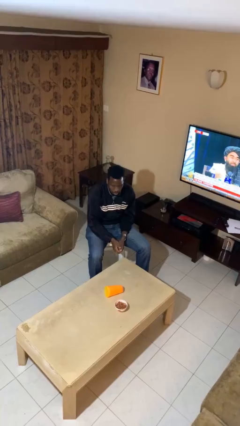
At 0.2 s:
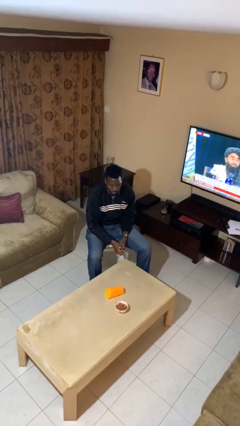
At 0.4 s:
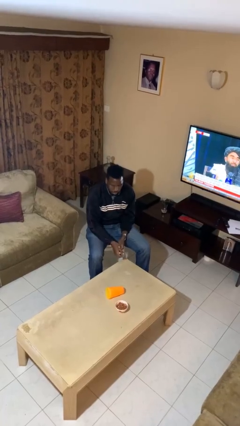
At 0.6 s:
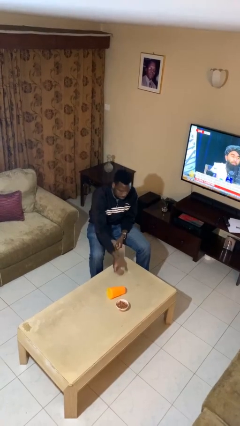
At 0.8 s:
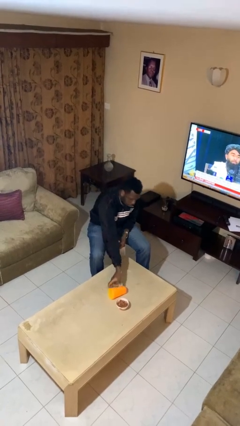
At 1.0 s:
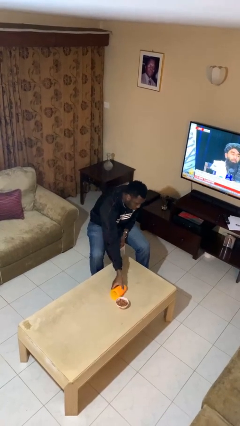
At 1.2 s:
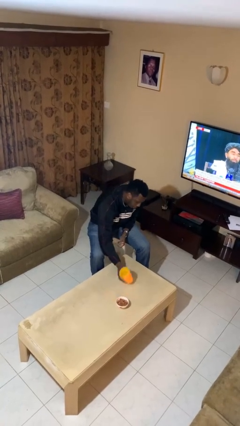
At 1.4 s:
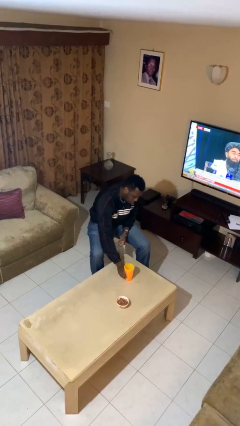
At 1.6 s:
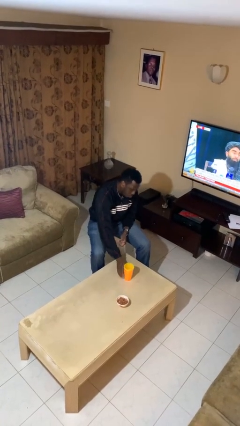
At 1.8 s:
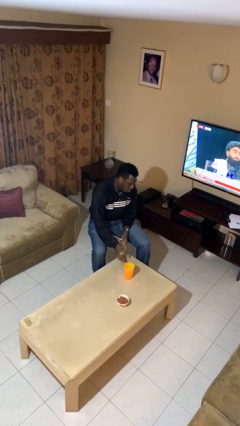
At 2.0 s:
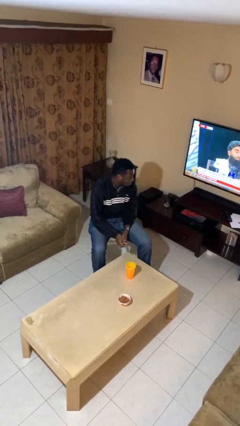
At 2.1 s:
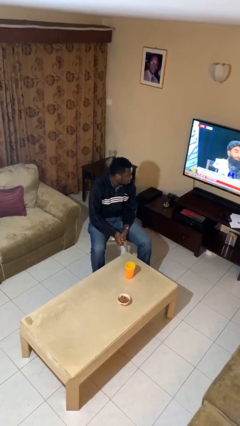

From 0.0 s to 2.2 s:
person sets upright glass

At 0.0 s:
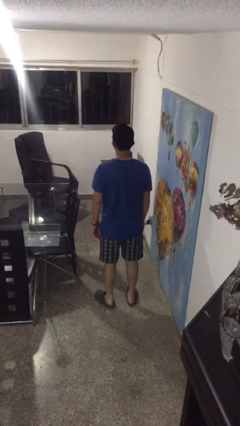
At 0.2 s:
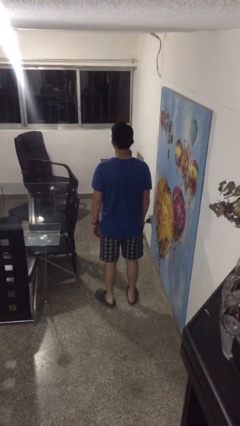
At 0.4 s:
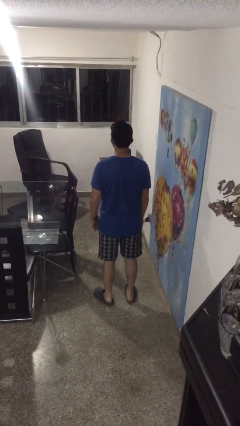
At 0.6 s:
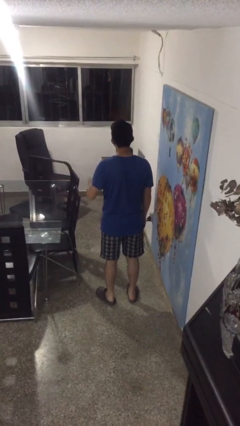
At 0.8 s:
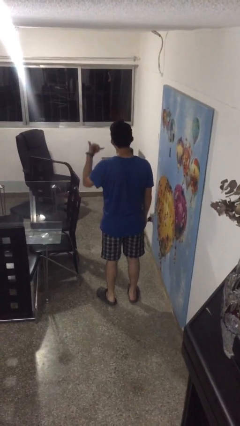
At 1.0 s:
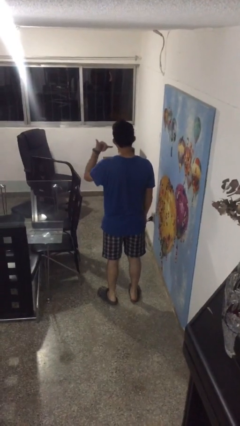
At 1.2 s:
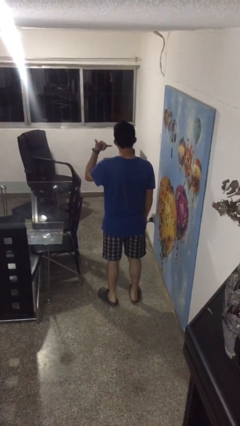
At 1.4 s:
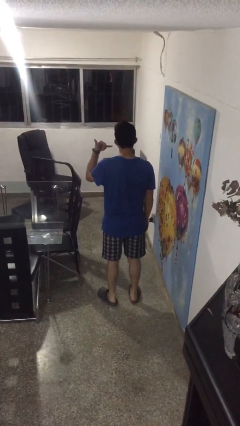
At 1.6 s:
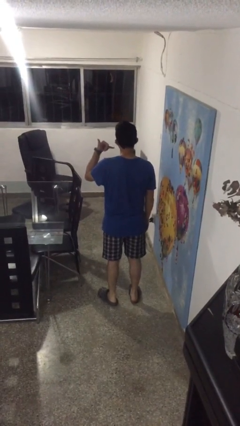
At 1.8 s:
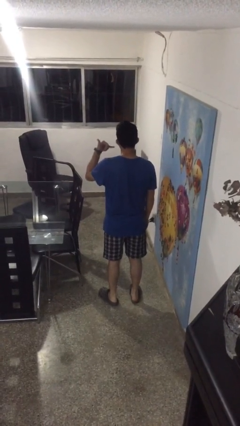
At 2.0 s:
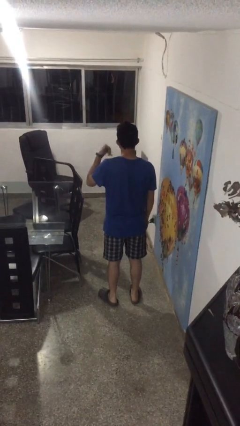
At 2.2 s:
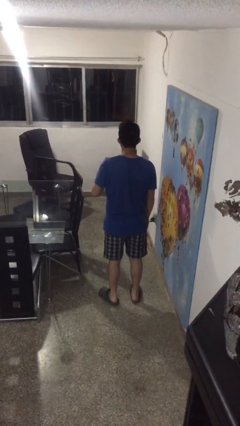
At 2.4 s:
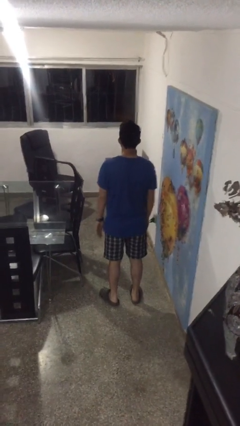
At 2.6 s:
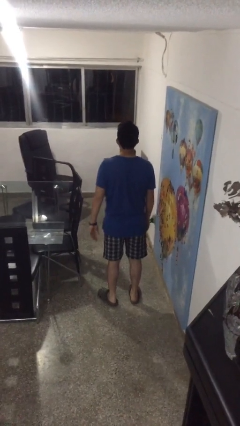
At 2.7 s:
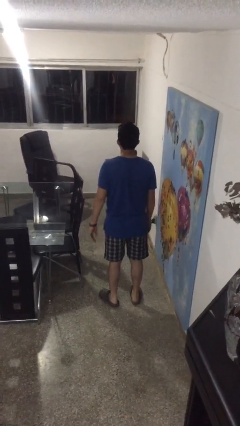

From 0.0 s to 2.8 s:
person gestures call me

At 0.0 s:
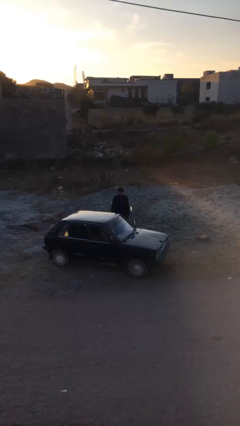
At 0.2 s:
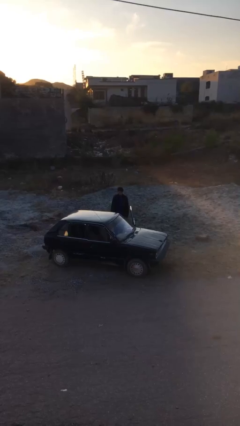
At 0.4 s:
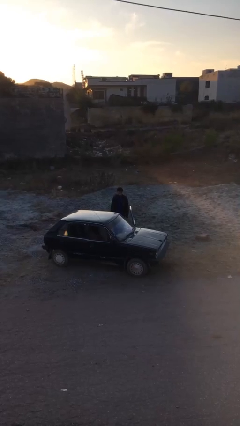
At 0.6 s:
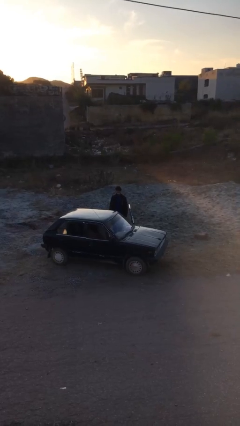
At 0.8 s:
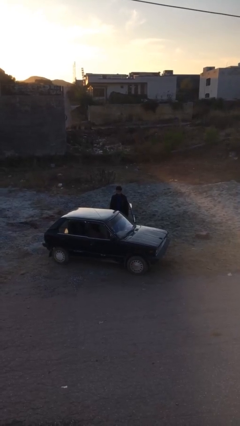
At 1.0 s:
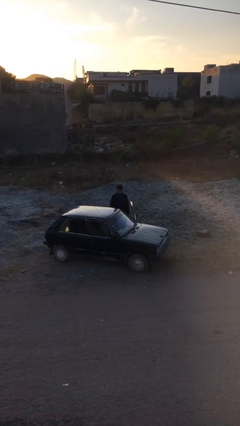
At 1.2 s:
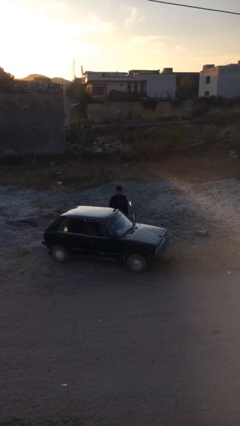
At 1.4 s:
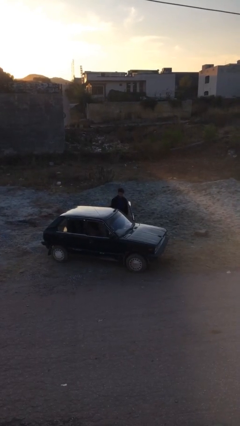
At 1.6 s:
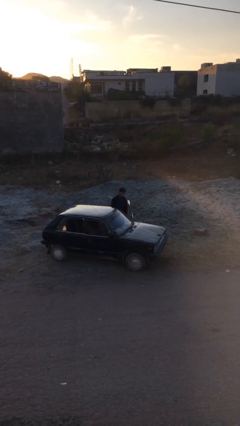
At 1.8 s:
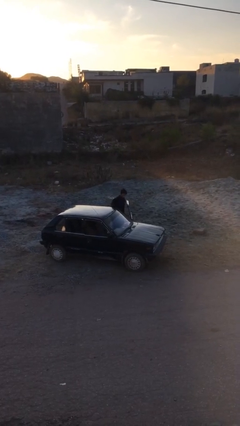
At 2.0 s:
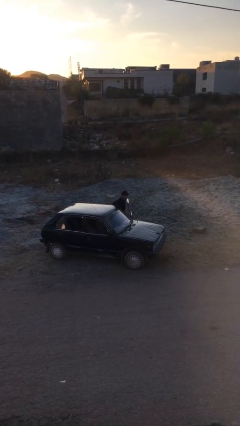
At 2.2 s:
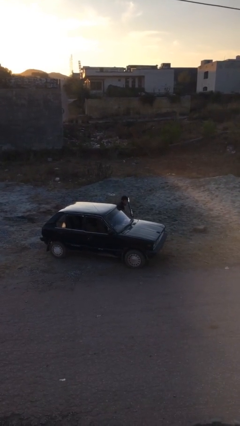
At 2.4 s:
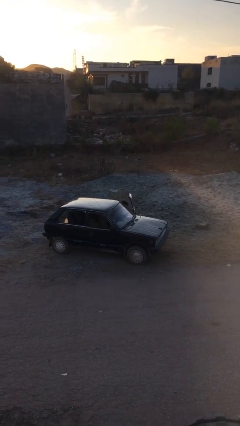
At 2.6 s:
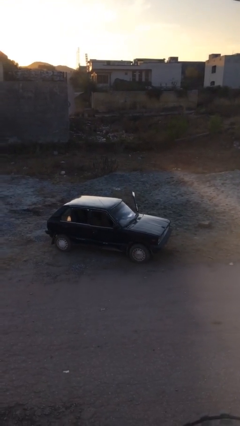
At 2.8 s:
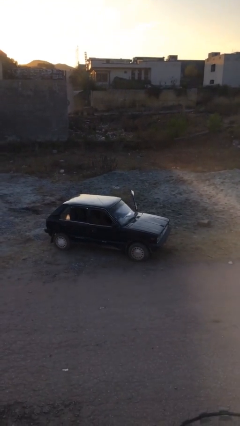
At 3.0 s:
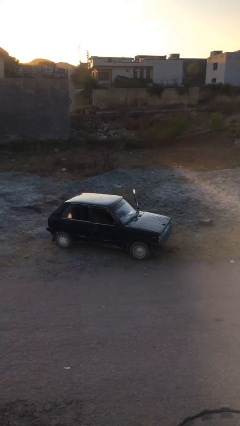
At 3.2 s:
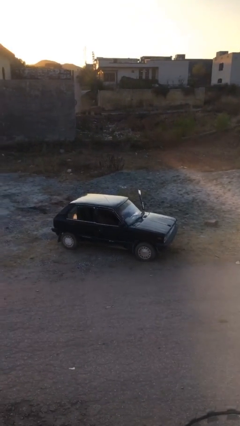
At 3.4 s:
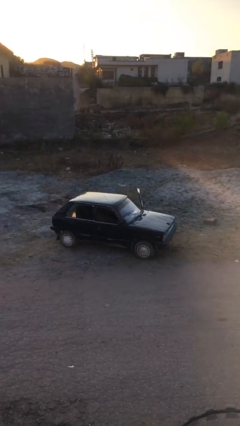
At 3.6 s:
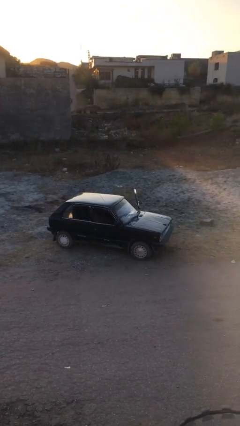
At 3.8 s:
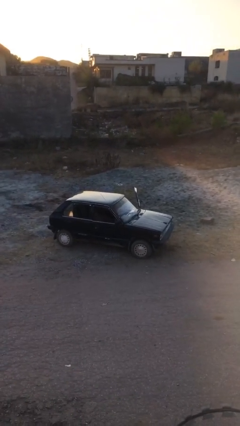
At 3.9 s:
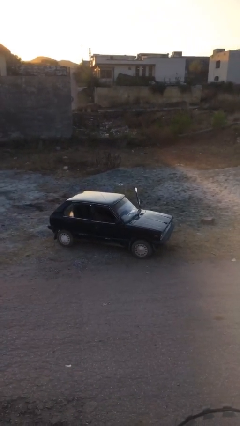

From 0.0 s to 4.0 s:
person enters car

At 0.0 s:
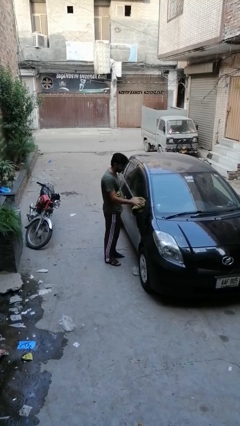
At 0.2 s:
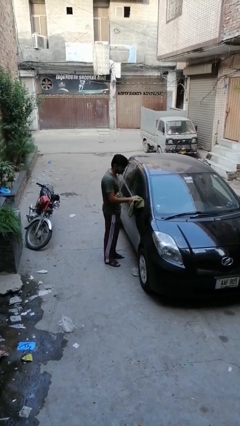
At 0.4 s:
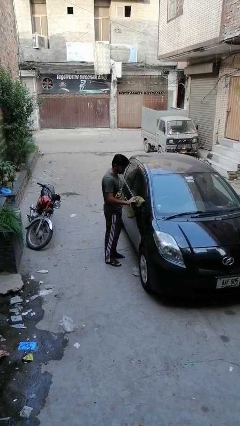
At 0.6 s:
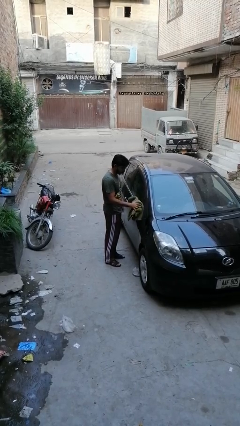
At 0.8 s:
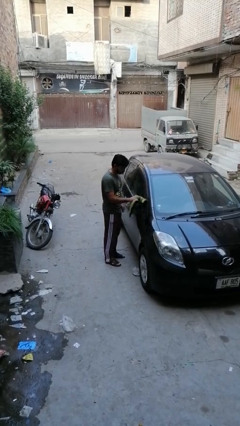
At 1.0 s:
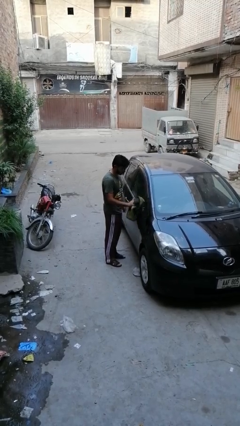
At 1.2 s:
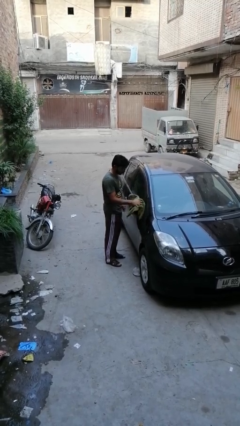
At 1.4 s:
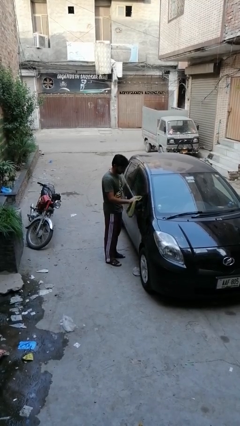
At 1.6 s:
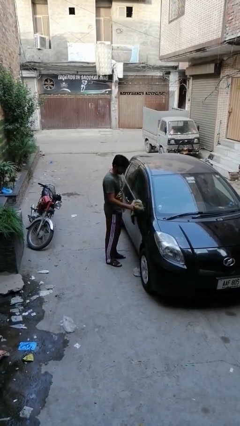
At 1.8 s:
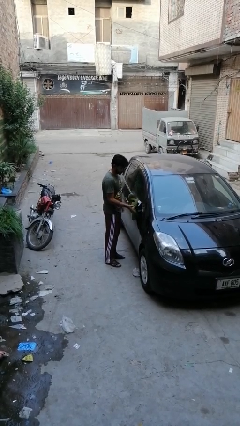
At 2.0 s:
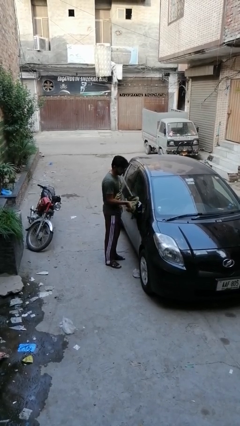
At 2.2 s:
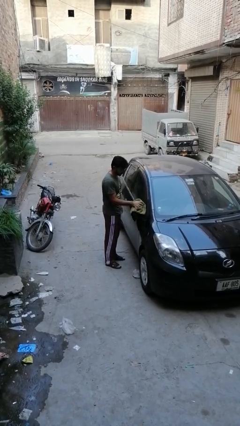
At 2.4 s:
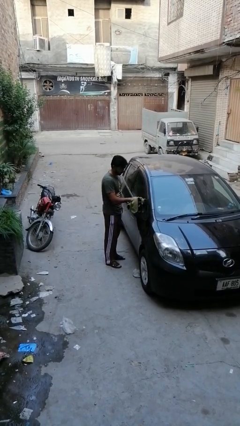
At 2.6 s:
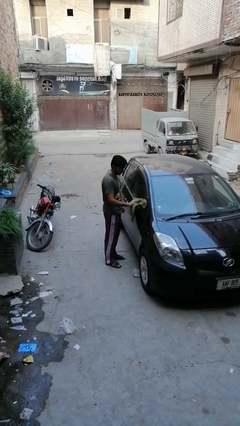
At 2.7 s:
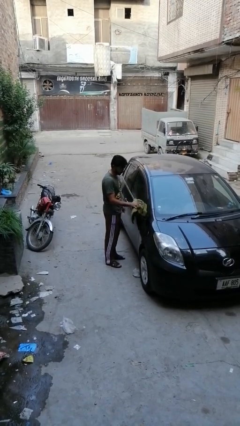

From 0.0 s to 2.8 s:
person polishes car with rag

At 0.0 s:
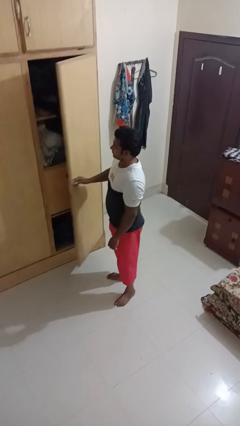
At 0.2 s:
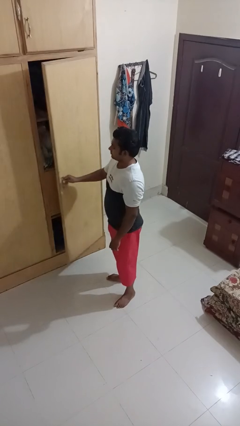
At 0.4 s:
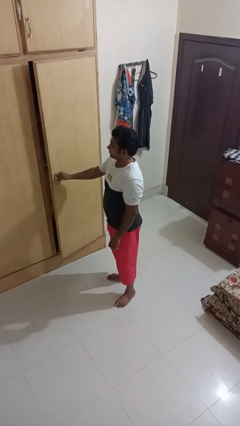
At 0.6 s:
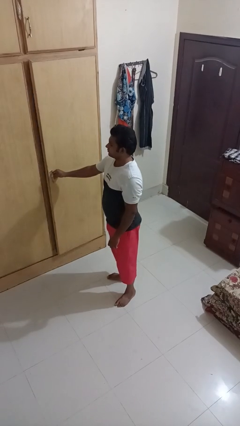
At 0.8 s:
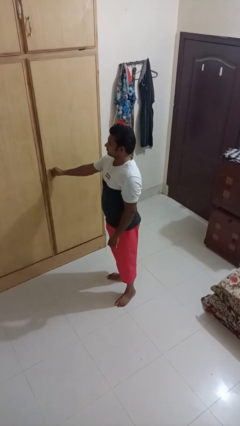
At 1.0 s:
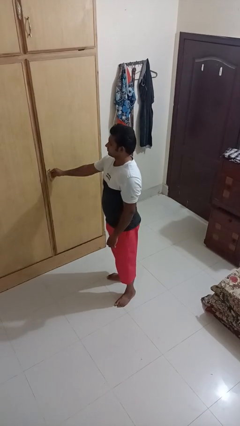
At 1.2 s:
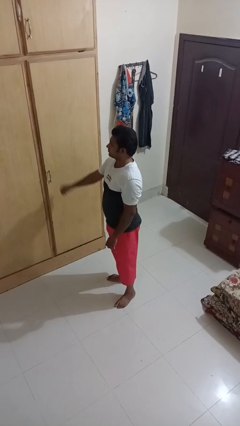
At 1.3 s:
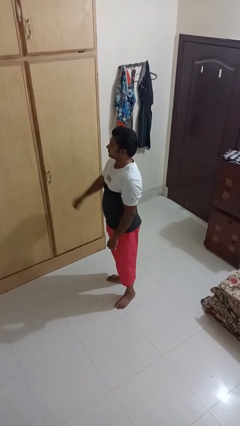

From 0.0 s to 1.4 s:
person closes closet door

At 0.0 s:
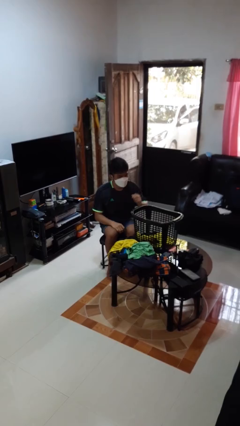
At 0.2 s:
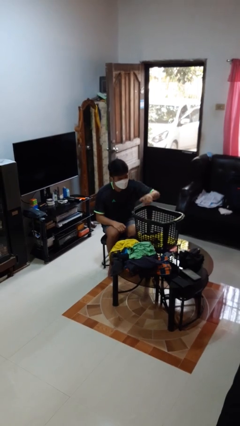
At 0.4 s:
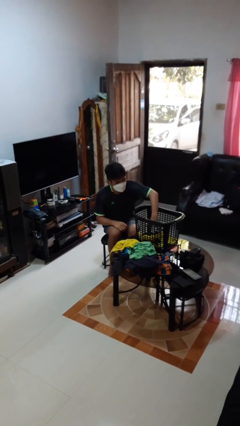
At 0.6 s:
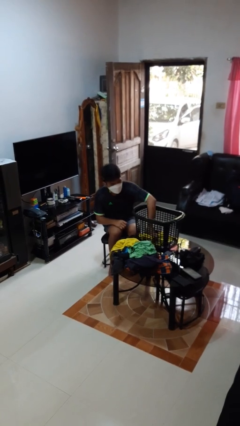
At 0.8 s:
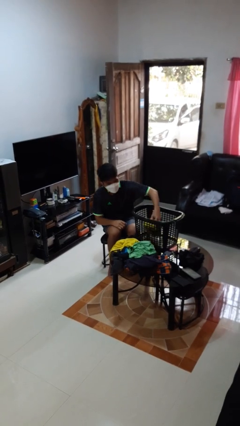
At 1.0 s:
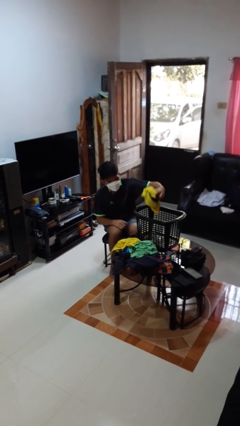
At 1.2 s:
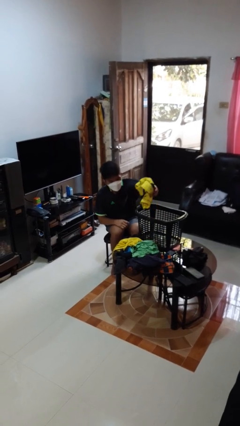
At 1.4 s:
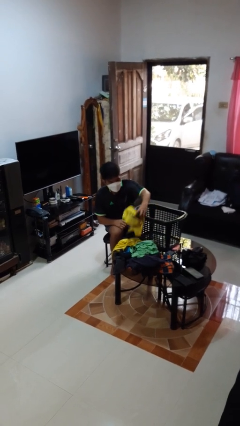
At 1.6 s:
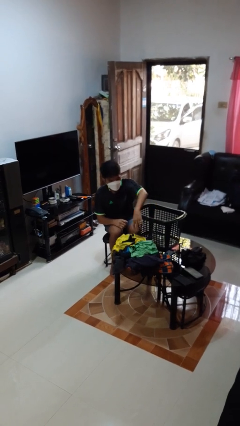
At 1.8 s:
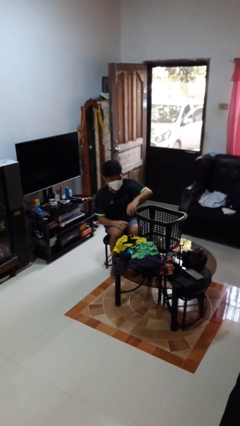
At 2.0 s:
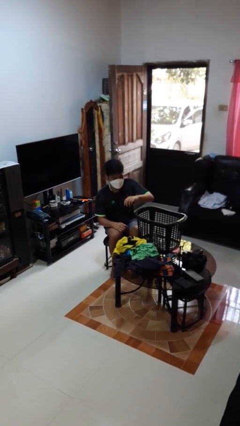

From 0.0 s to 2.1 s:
person takes object from basket

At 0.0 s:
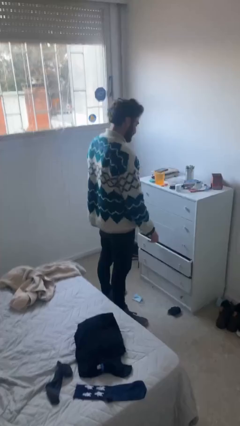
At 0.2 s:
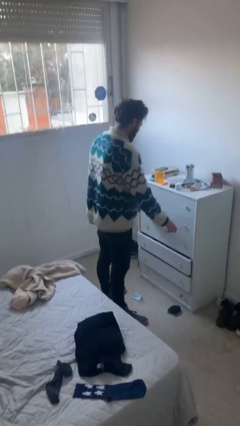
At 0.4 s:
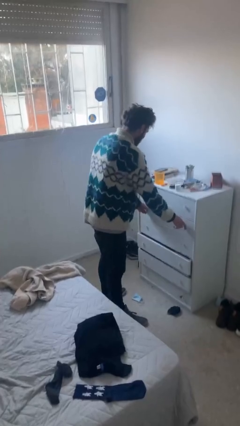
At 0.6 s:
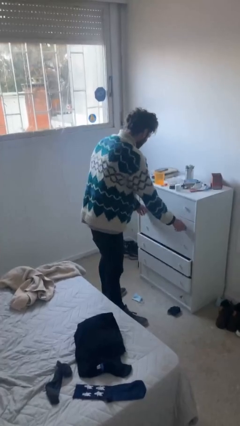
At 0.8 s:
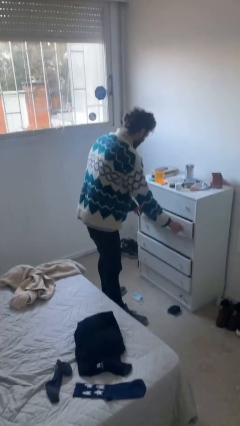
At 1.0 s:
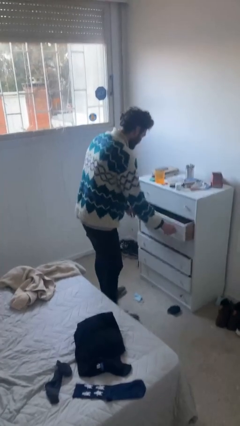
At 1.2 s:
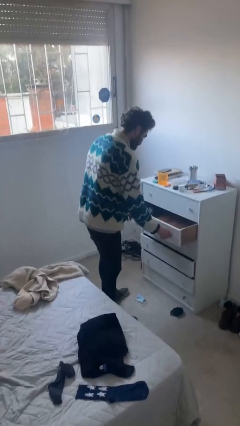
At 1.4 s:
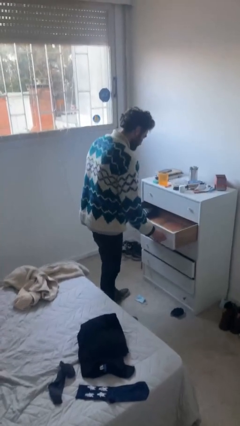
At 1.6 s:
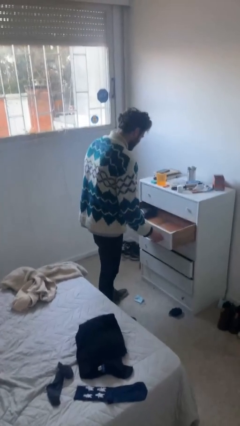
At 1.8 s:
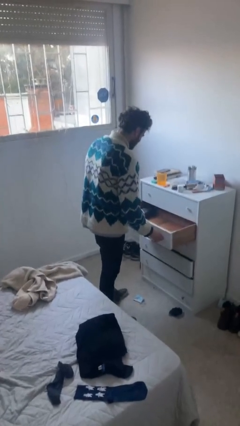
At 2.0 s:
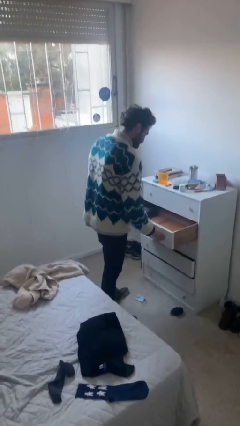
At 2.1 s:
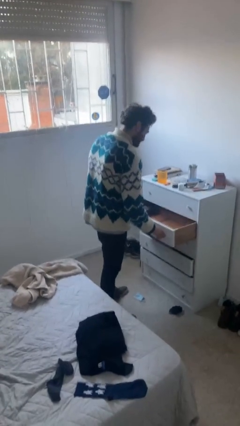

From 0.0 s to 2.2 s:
person opens dresser drawer
